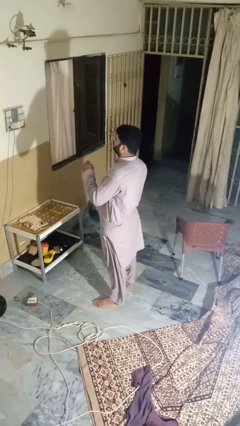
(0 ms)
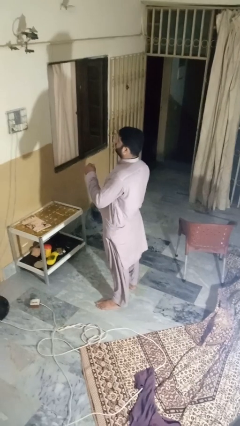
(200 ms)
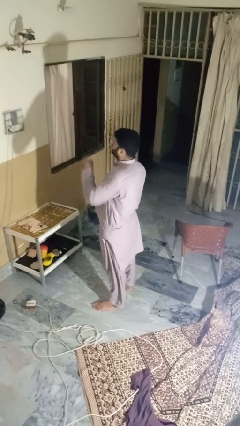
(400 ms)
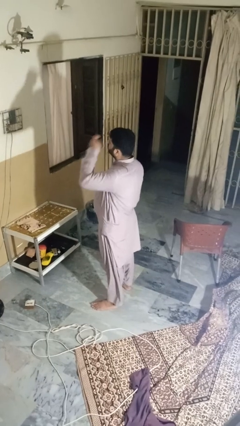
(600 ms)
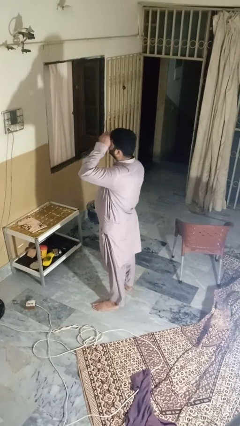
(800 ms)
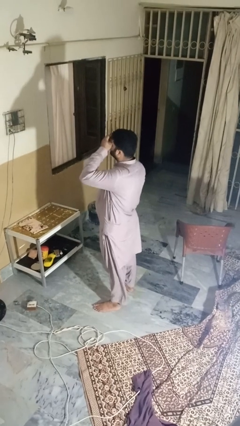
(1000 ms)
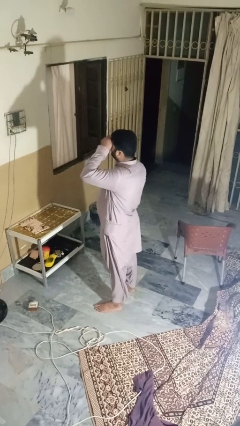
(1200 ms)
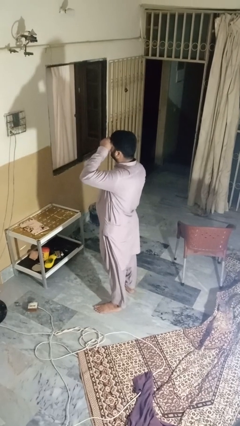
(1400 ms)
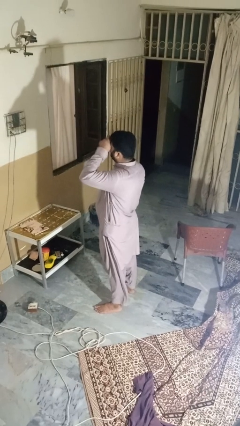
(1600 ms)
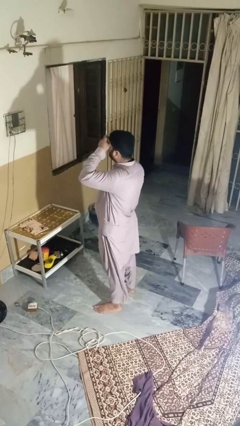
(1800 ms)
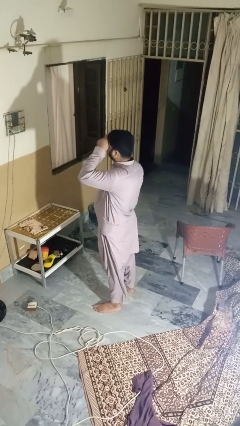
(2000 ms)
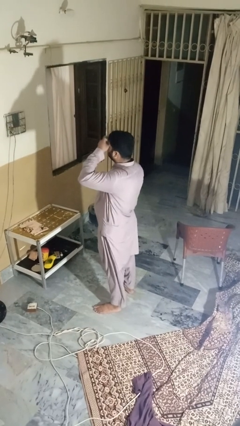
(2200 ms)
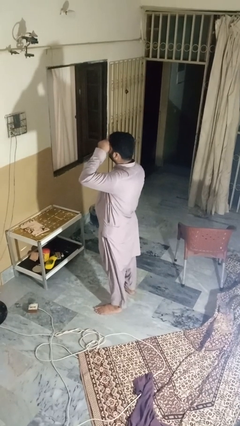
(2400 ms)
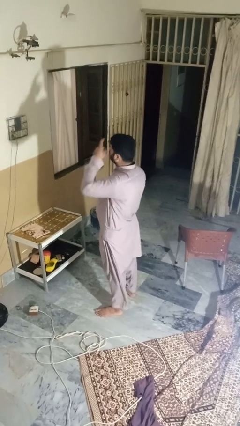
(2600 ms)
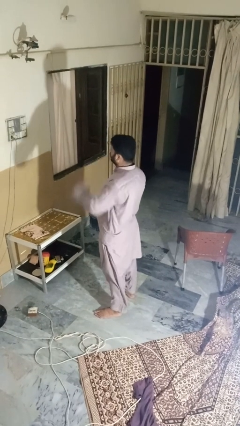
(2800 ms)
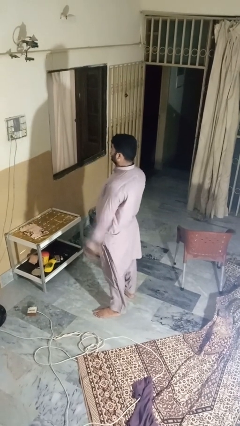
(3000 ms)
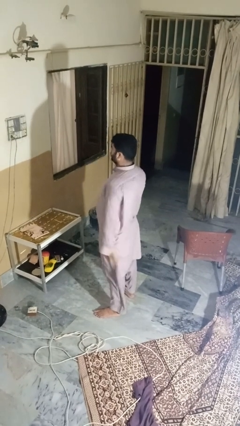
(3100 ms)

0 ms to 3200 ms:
person shades eyes

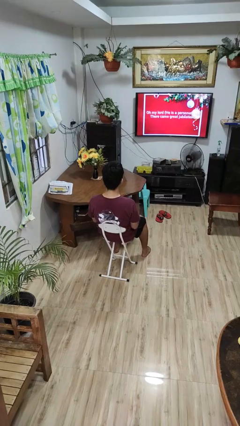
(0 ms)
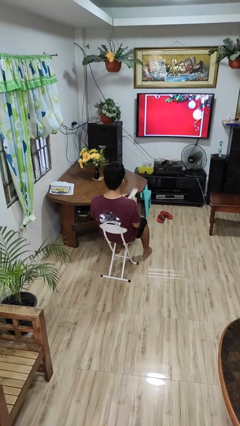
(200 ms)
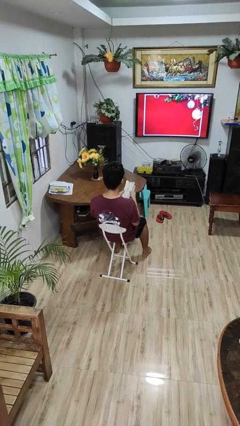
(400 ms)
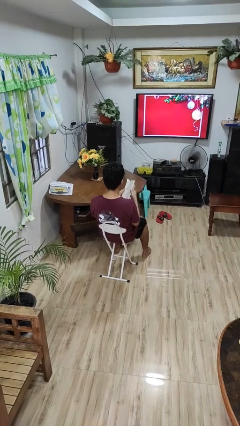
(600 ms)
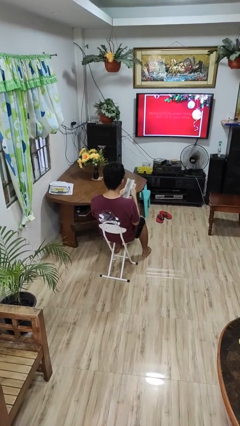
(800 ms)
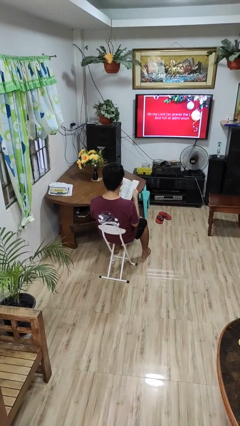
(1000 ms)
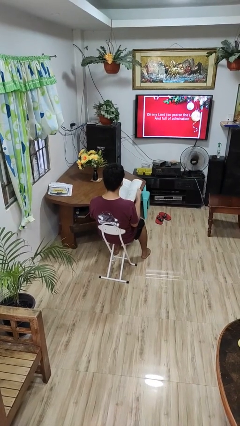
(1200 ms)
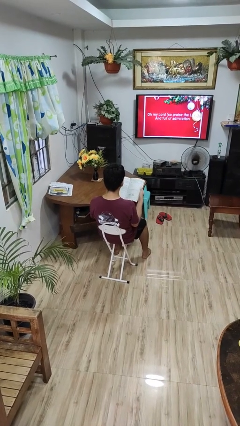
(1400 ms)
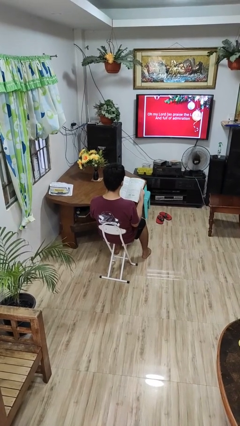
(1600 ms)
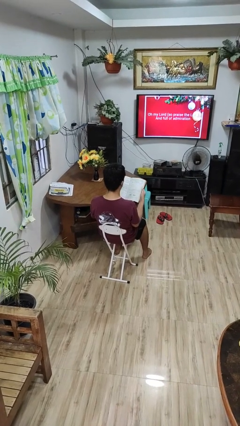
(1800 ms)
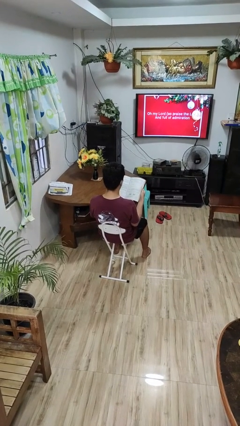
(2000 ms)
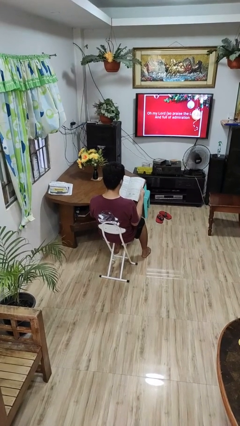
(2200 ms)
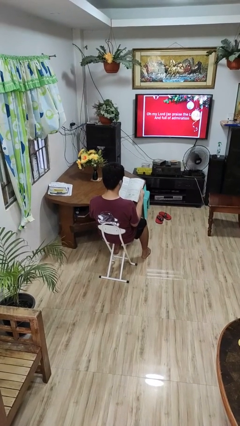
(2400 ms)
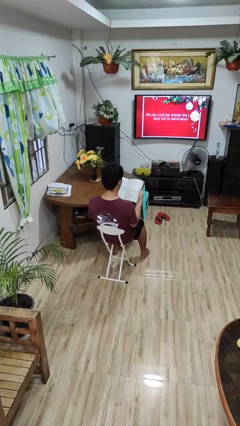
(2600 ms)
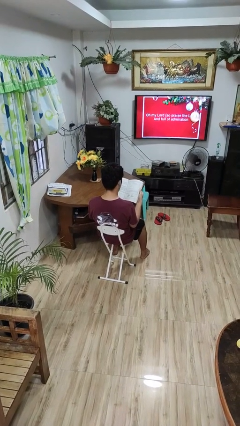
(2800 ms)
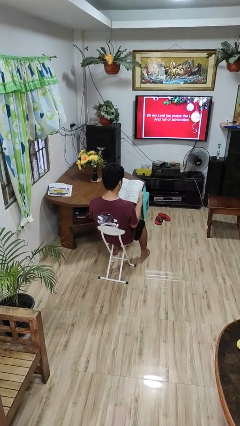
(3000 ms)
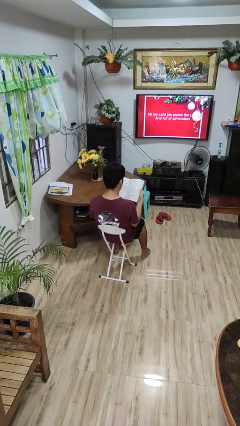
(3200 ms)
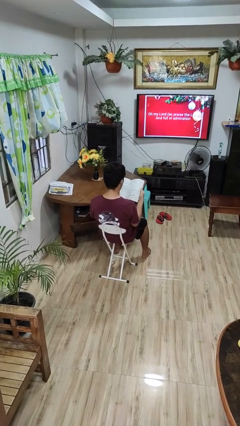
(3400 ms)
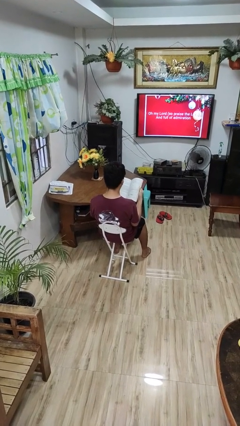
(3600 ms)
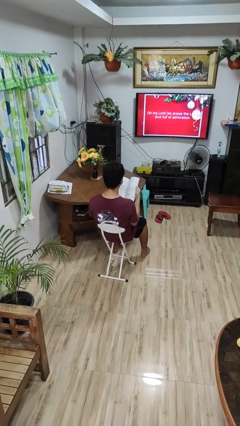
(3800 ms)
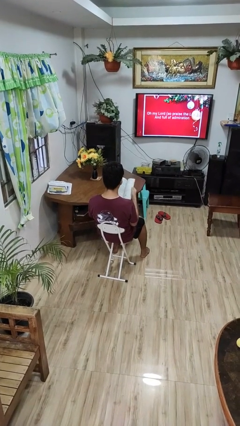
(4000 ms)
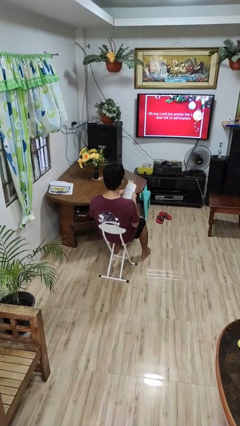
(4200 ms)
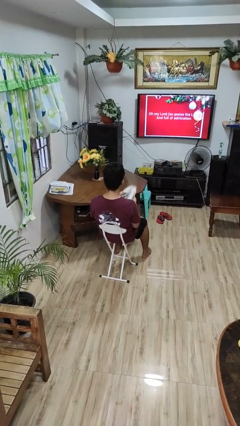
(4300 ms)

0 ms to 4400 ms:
person reads book

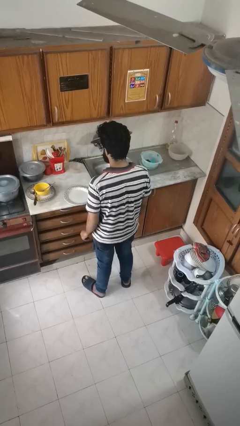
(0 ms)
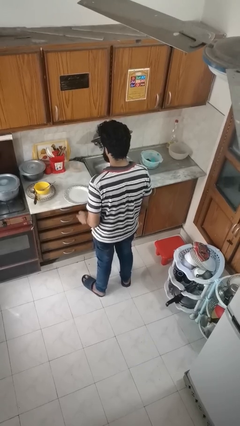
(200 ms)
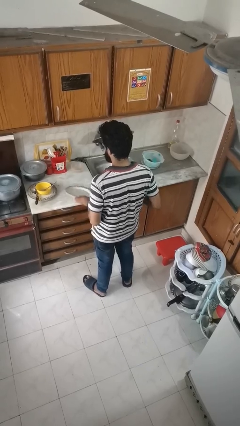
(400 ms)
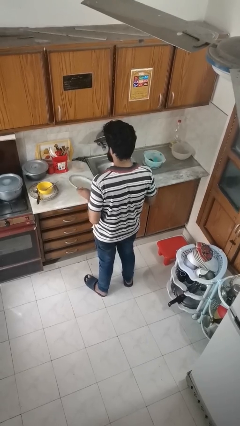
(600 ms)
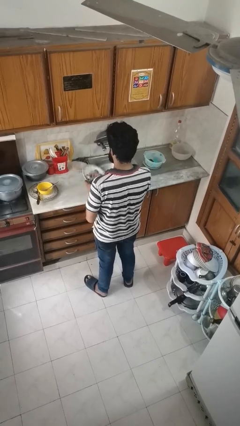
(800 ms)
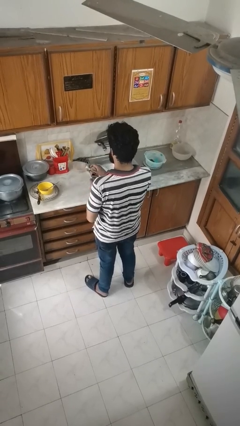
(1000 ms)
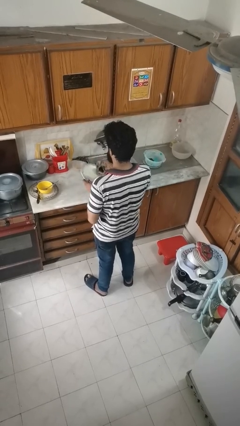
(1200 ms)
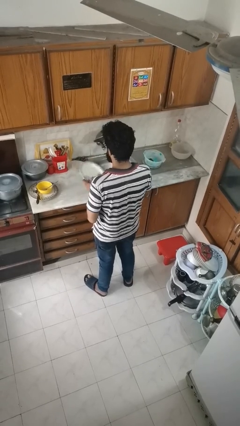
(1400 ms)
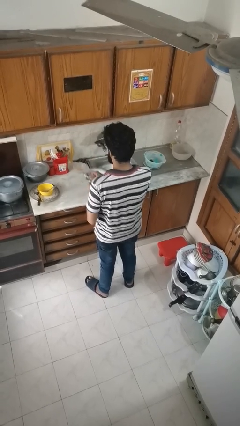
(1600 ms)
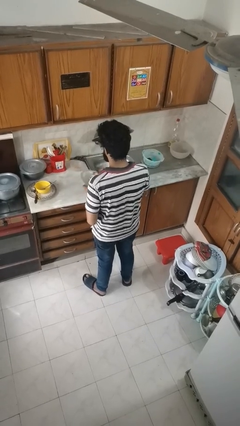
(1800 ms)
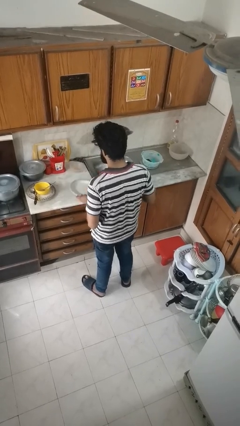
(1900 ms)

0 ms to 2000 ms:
person dries dish

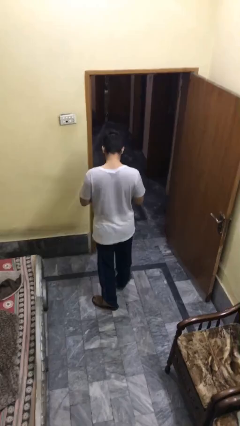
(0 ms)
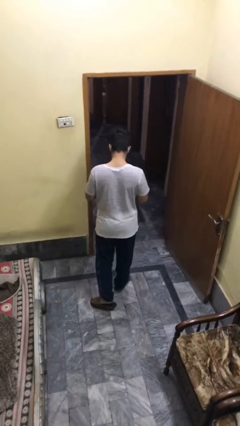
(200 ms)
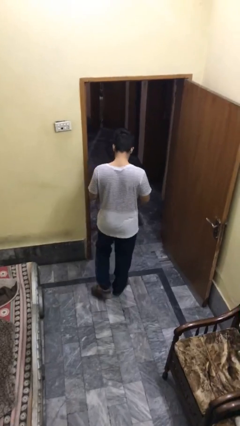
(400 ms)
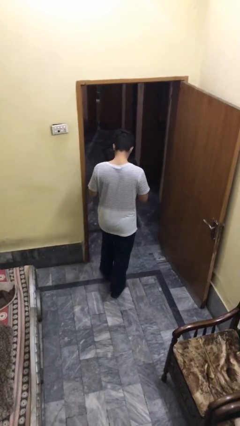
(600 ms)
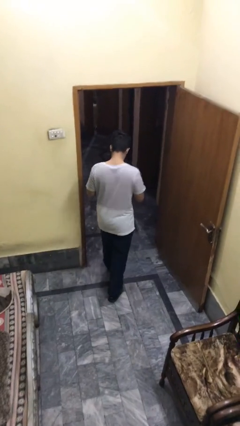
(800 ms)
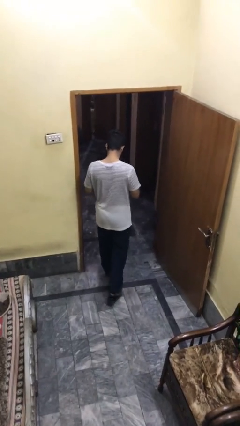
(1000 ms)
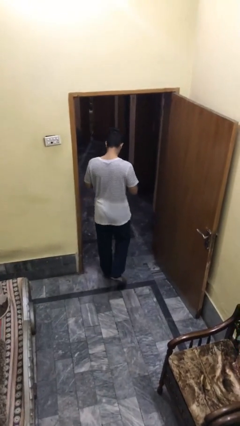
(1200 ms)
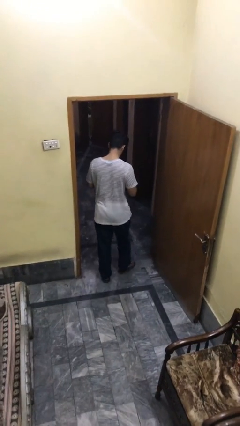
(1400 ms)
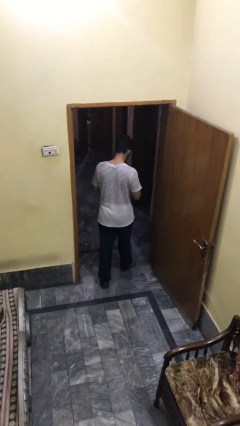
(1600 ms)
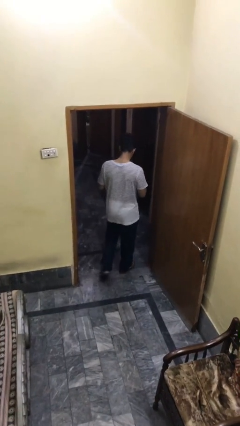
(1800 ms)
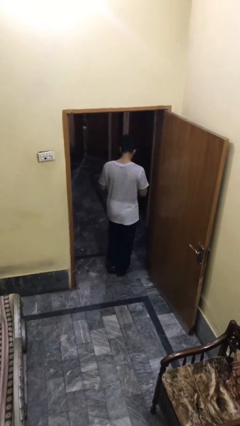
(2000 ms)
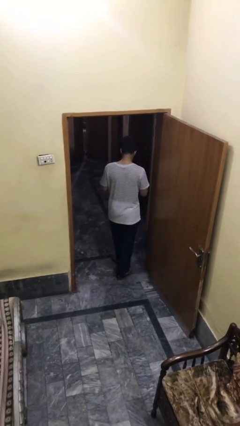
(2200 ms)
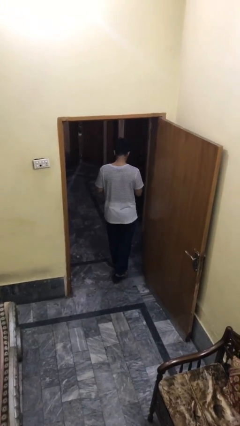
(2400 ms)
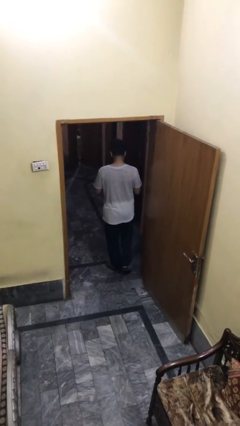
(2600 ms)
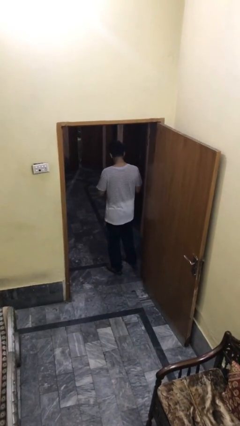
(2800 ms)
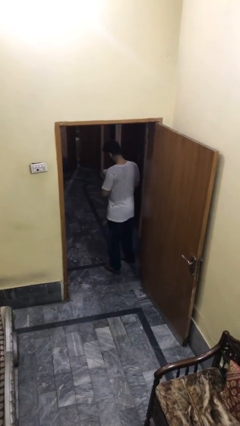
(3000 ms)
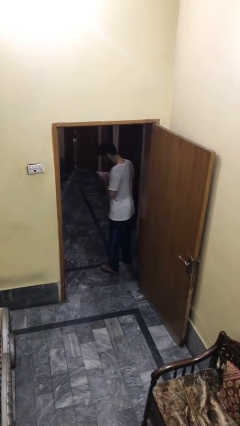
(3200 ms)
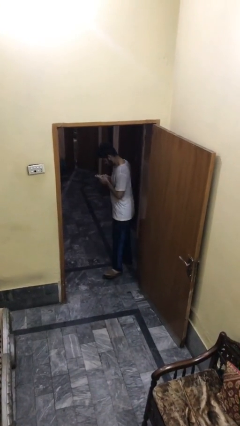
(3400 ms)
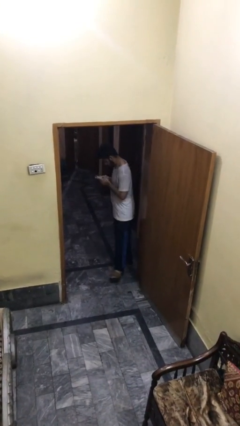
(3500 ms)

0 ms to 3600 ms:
person exits scene through structure

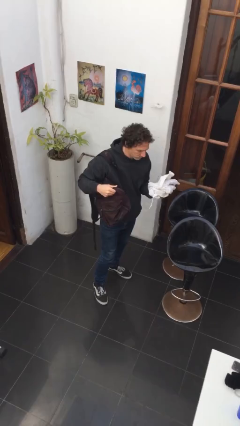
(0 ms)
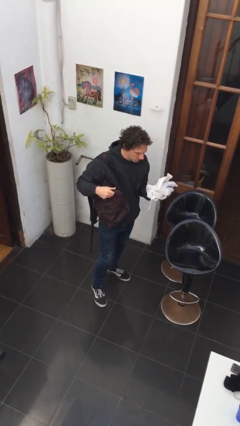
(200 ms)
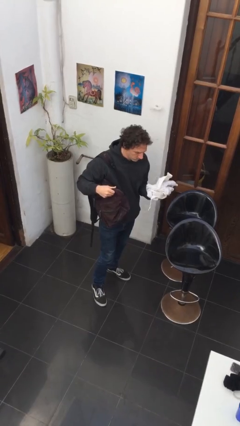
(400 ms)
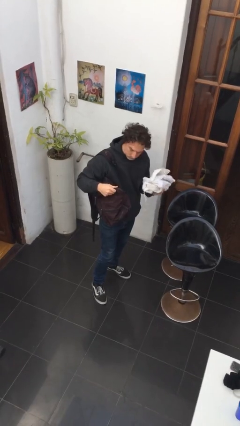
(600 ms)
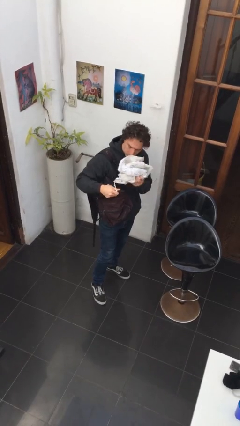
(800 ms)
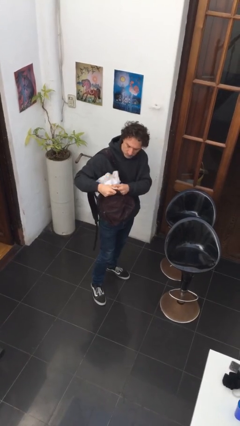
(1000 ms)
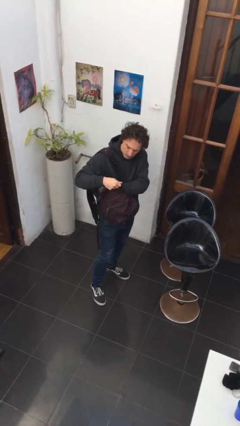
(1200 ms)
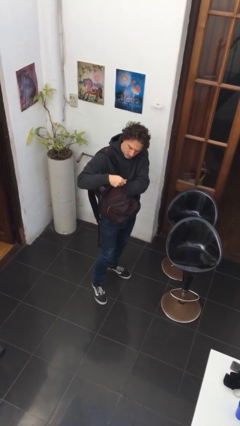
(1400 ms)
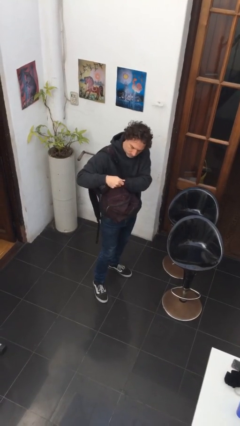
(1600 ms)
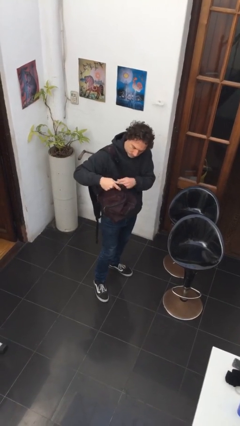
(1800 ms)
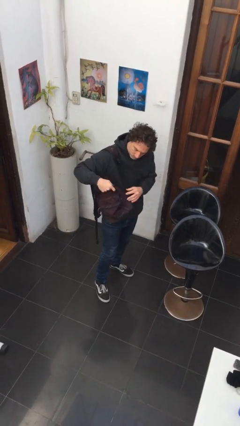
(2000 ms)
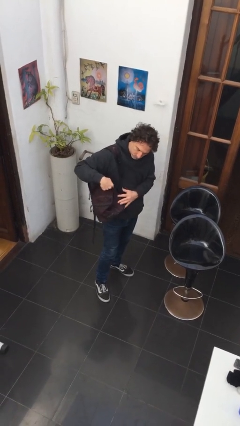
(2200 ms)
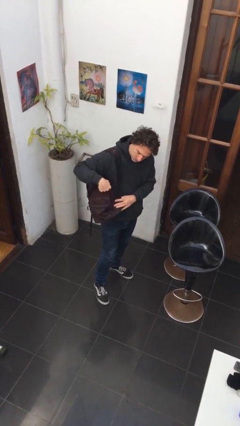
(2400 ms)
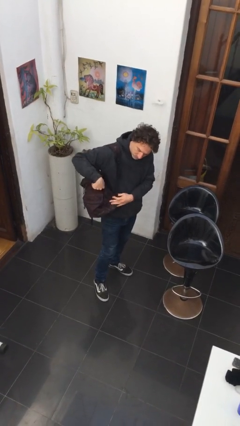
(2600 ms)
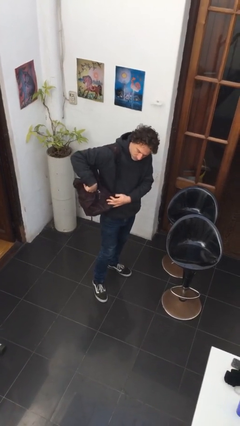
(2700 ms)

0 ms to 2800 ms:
person puts object into backpack

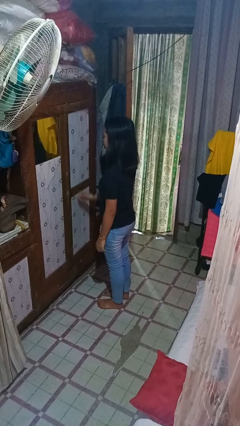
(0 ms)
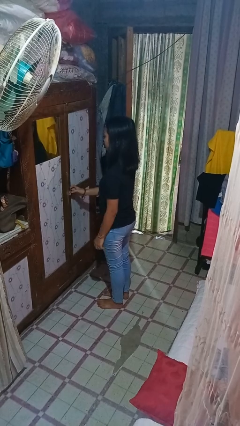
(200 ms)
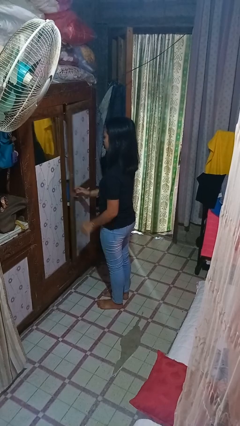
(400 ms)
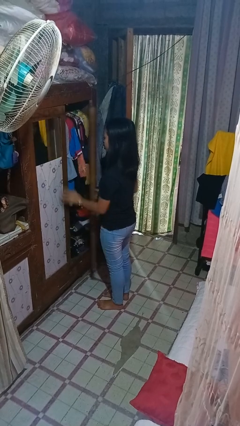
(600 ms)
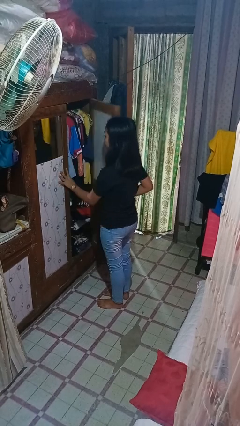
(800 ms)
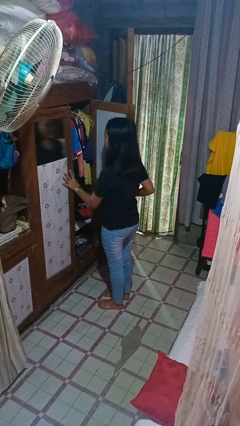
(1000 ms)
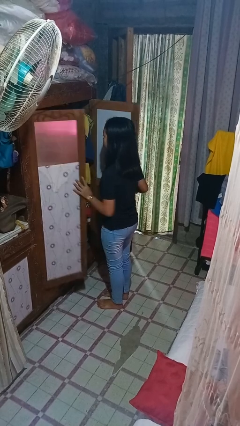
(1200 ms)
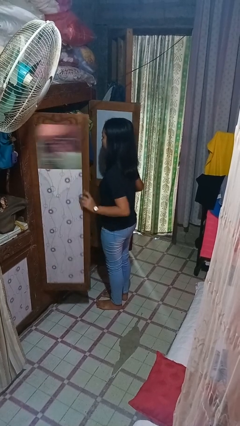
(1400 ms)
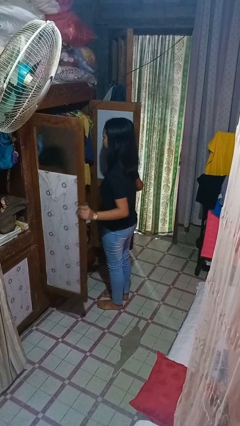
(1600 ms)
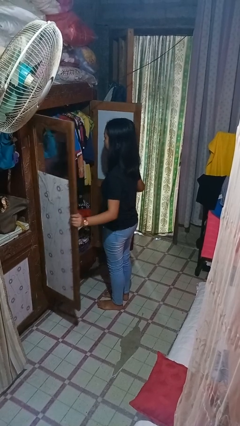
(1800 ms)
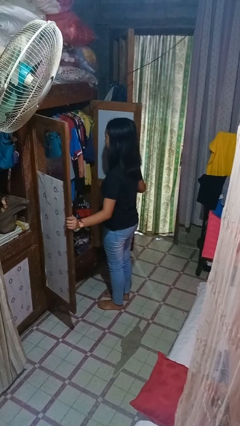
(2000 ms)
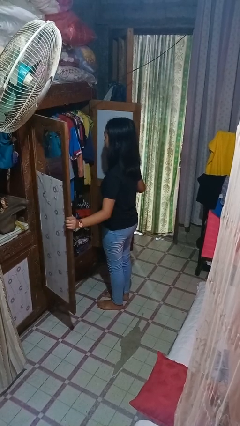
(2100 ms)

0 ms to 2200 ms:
person opens closet door
